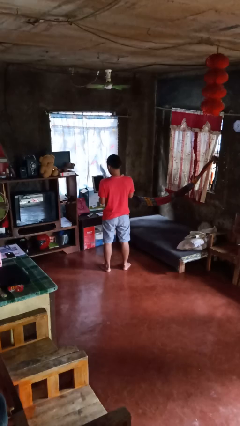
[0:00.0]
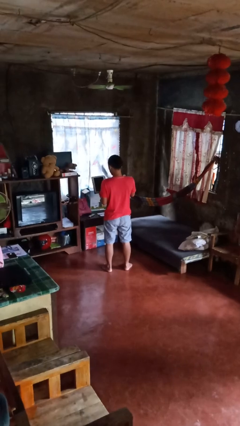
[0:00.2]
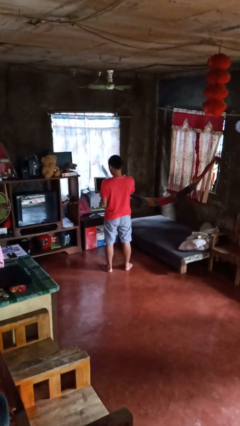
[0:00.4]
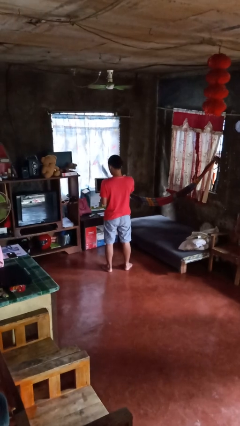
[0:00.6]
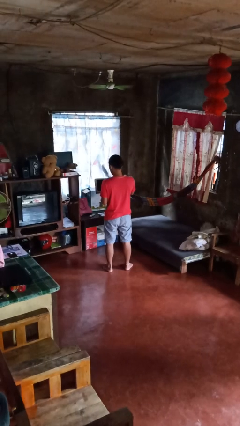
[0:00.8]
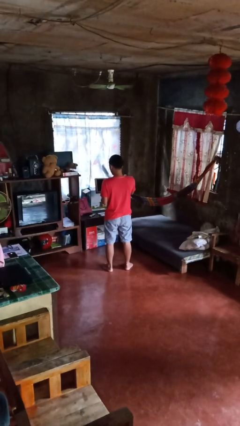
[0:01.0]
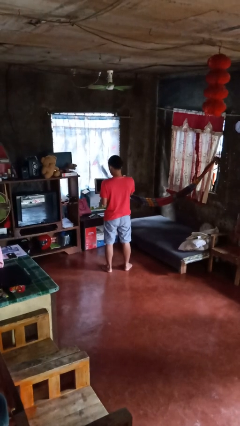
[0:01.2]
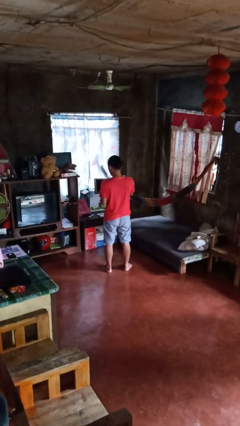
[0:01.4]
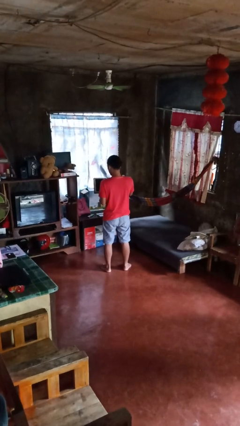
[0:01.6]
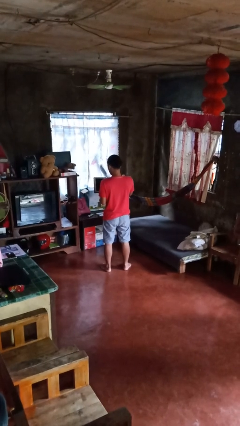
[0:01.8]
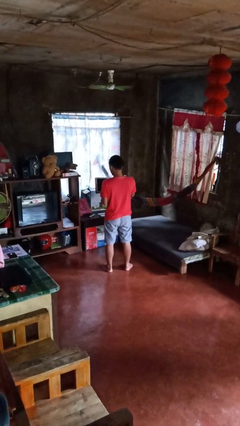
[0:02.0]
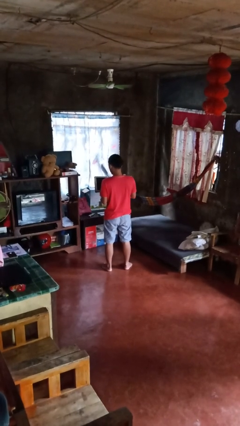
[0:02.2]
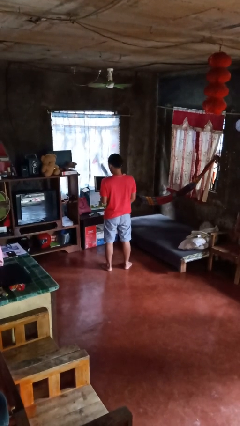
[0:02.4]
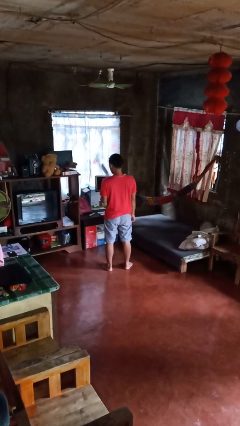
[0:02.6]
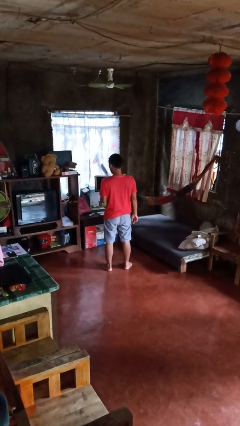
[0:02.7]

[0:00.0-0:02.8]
person interacts with tablet

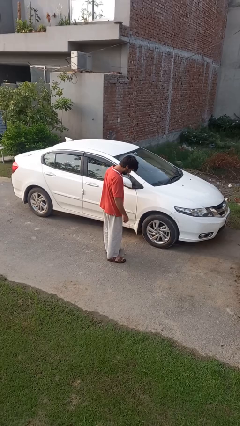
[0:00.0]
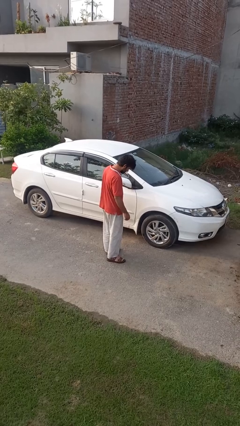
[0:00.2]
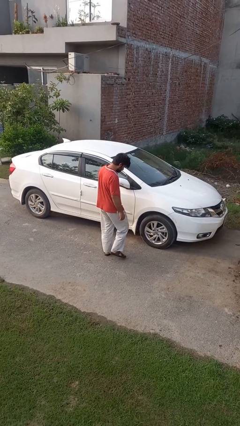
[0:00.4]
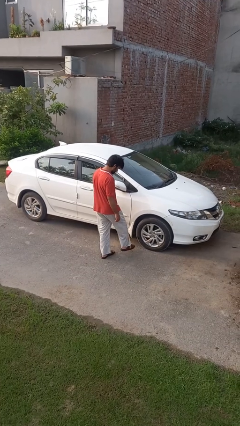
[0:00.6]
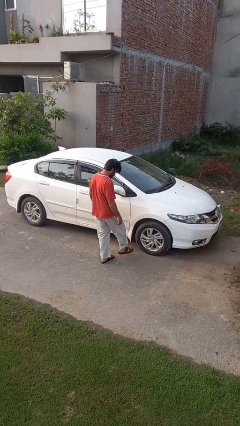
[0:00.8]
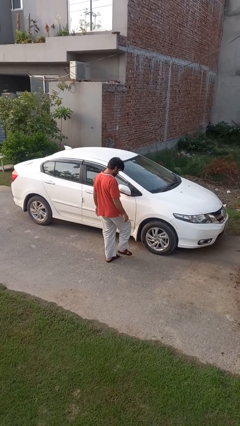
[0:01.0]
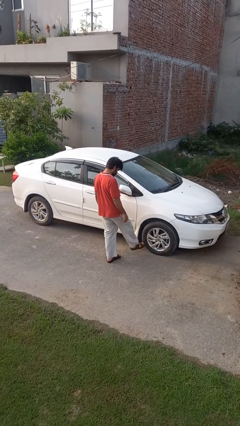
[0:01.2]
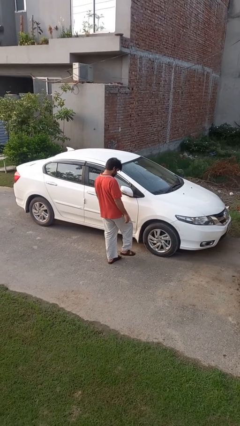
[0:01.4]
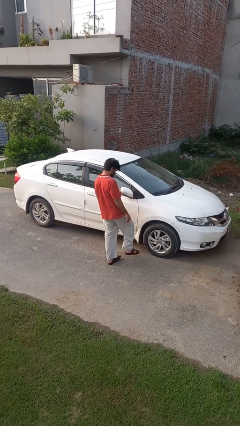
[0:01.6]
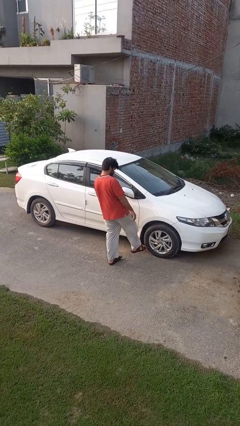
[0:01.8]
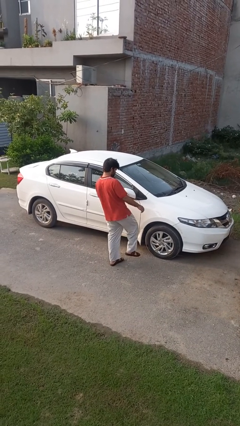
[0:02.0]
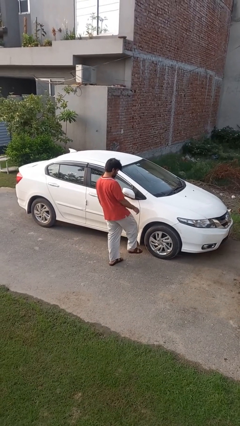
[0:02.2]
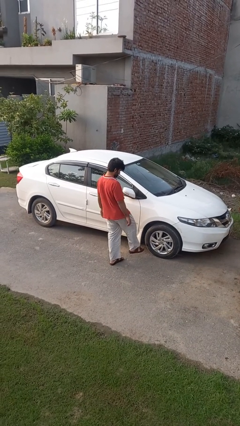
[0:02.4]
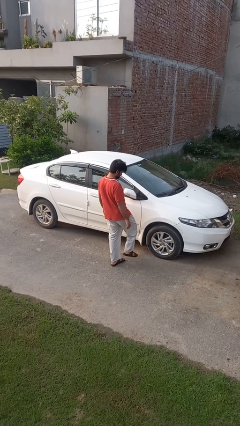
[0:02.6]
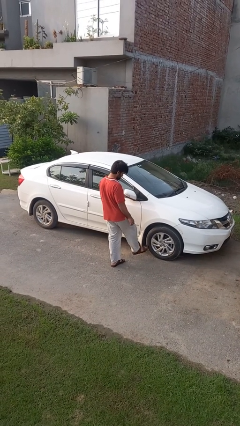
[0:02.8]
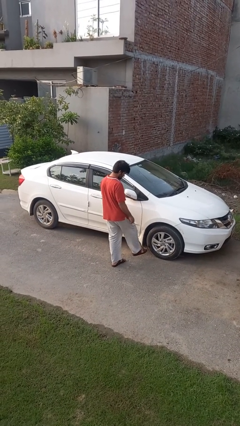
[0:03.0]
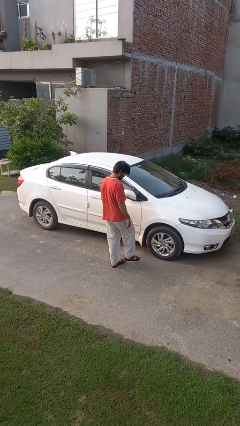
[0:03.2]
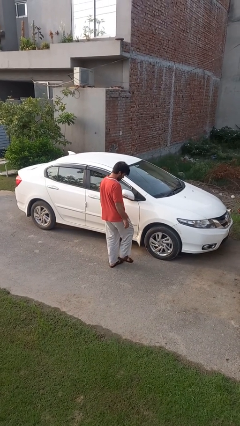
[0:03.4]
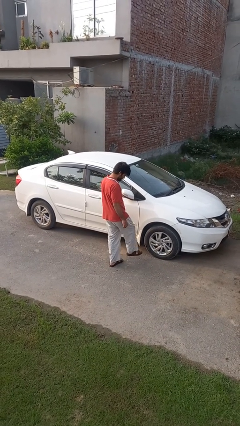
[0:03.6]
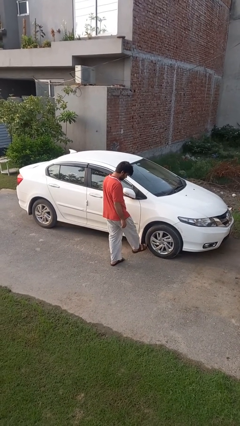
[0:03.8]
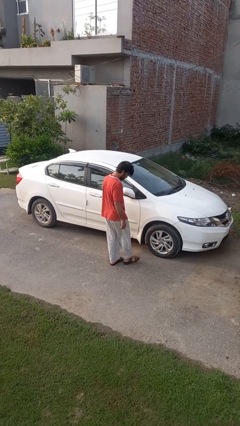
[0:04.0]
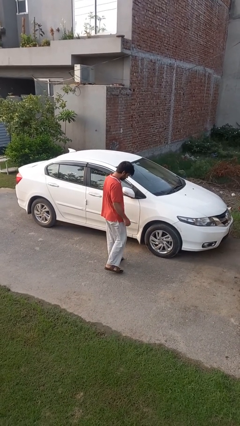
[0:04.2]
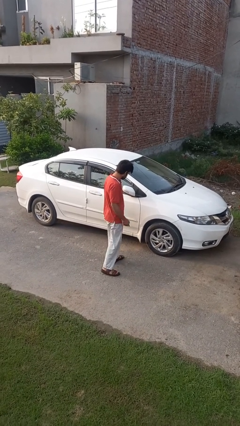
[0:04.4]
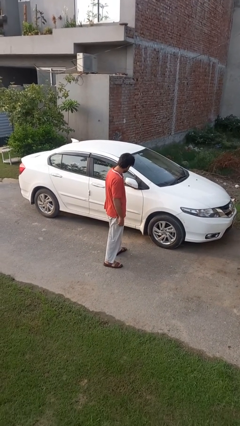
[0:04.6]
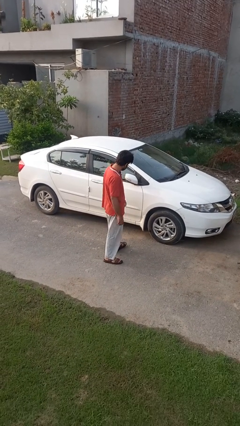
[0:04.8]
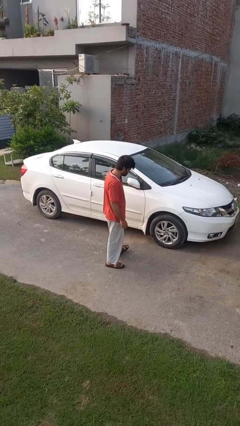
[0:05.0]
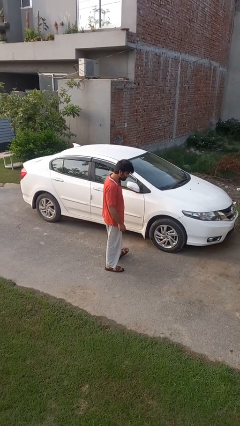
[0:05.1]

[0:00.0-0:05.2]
person kicks car tires

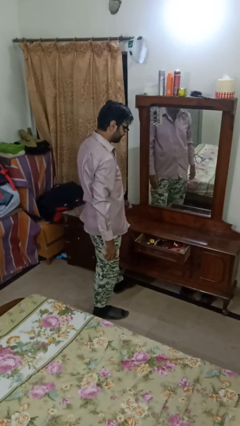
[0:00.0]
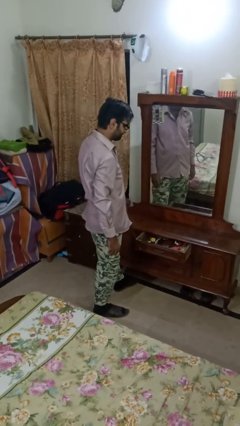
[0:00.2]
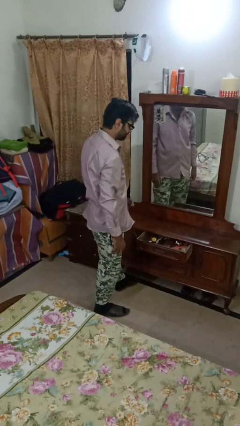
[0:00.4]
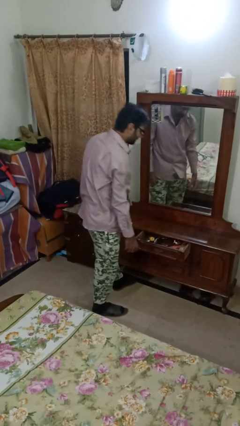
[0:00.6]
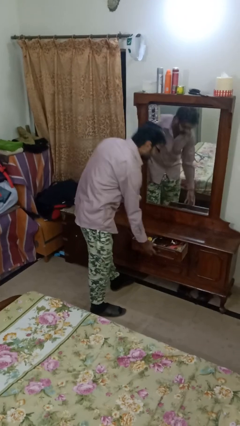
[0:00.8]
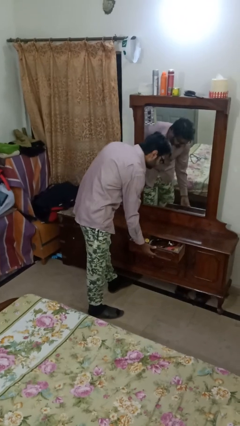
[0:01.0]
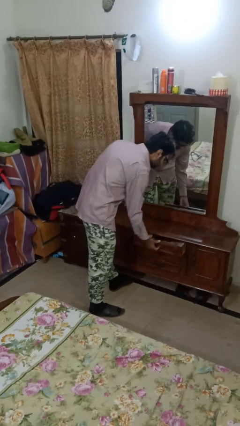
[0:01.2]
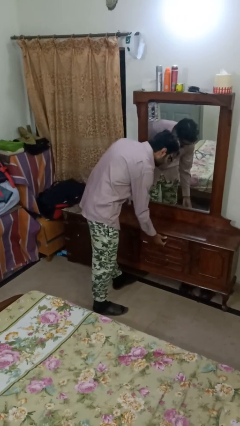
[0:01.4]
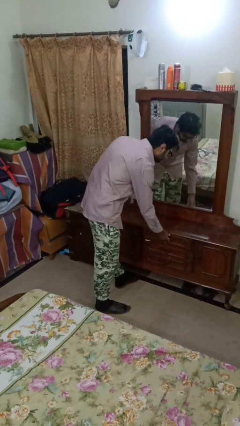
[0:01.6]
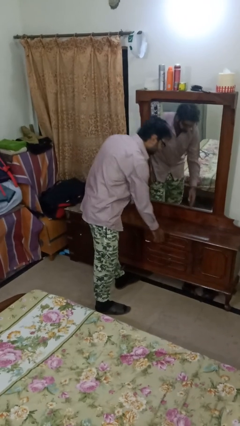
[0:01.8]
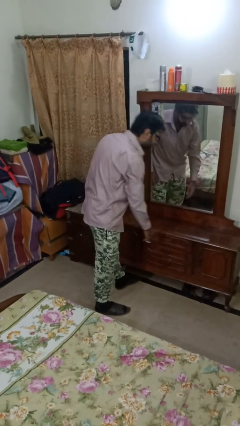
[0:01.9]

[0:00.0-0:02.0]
person closes dresser drawer

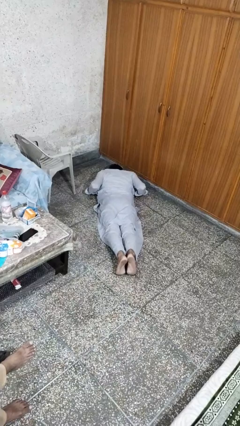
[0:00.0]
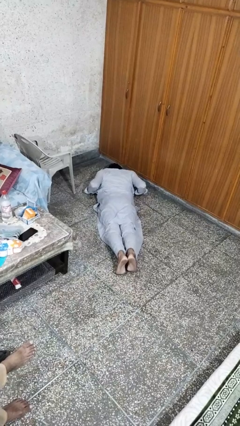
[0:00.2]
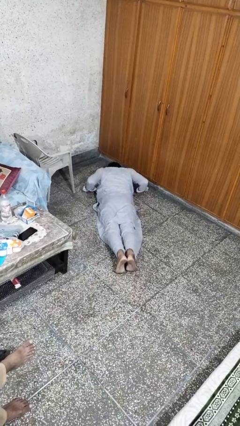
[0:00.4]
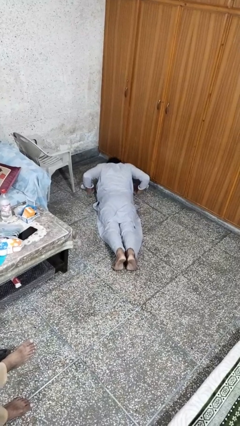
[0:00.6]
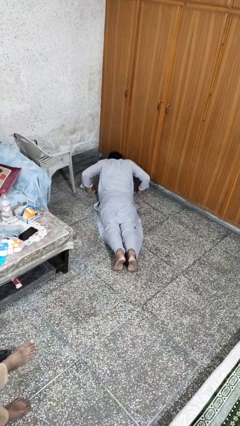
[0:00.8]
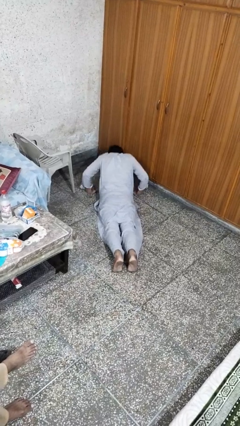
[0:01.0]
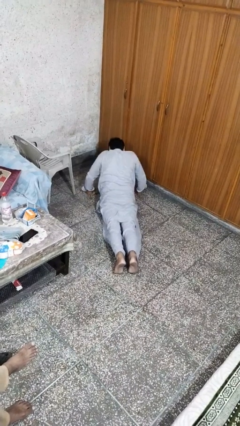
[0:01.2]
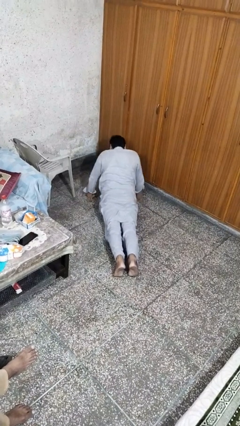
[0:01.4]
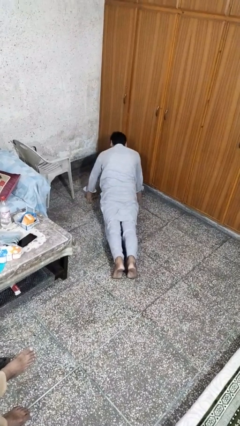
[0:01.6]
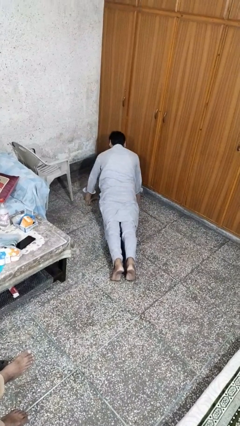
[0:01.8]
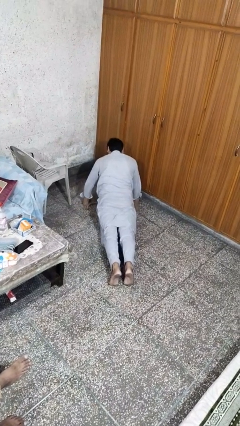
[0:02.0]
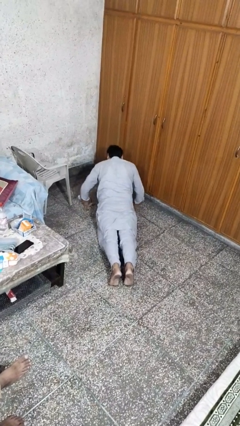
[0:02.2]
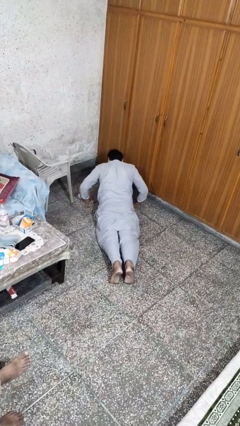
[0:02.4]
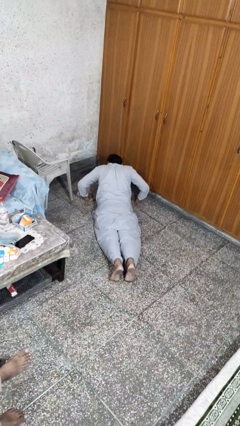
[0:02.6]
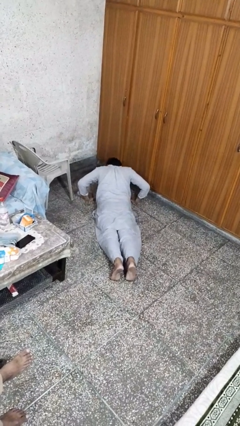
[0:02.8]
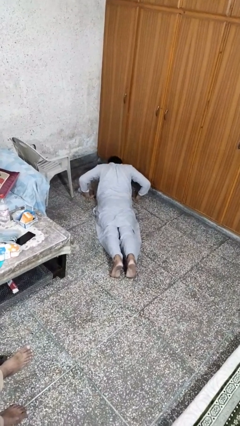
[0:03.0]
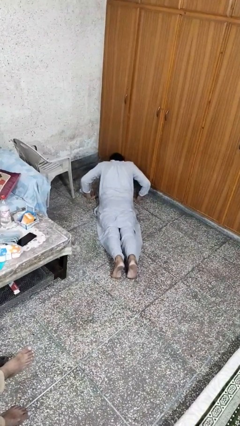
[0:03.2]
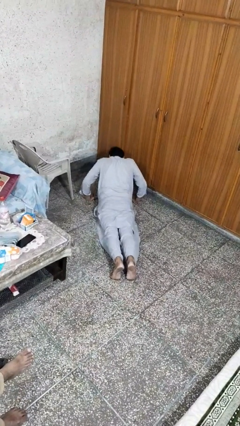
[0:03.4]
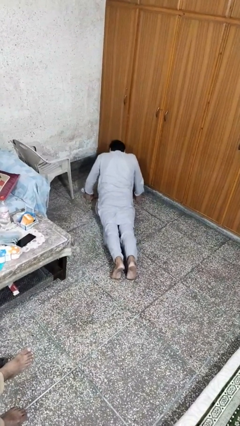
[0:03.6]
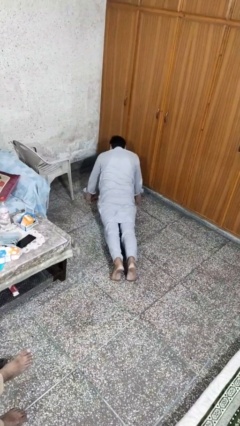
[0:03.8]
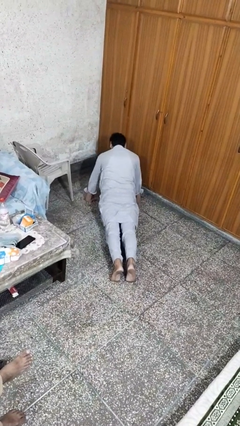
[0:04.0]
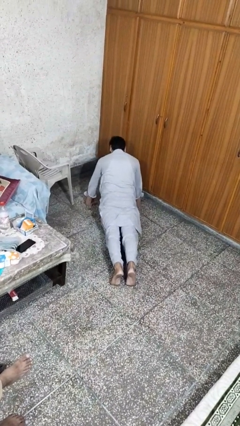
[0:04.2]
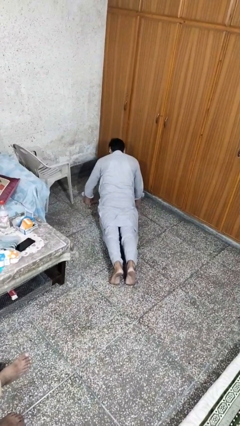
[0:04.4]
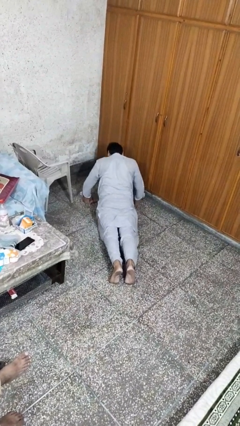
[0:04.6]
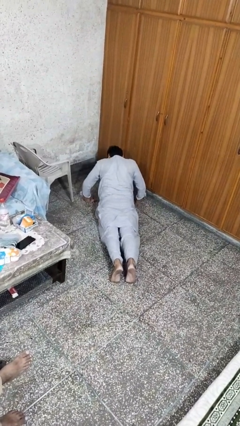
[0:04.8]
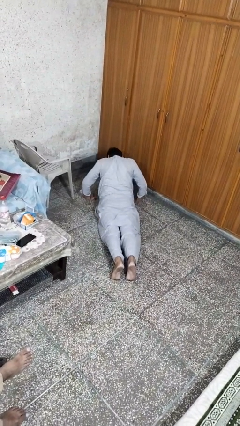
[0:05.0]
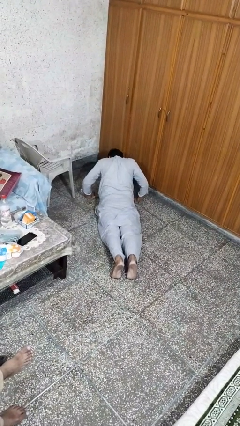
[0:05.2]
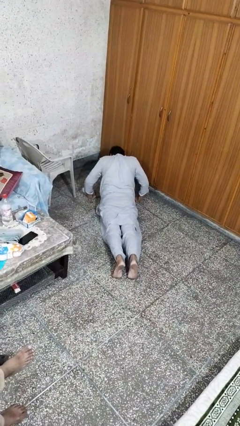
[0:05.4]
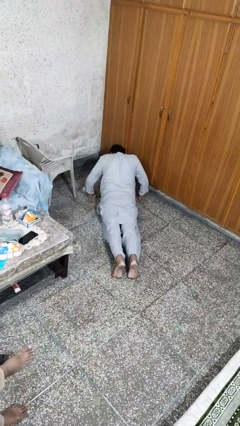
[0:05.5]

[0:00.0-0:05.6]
person exercises with pushup

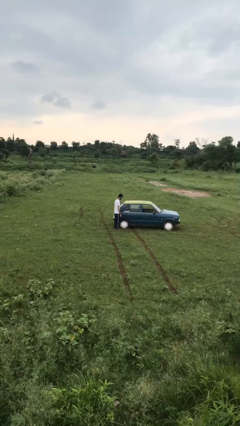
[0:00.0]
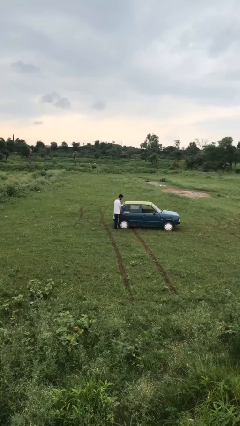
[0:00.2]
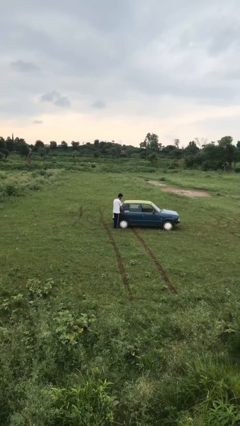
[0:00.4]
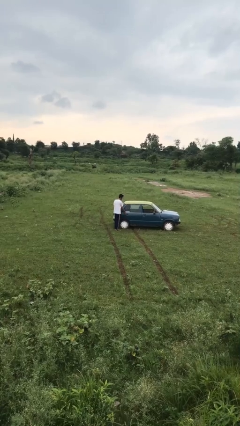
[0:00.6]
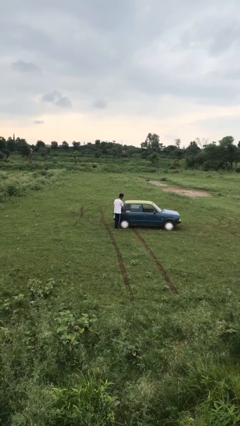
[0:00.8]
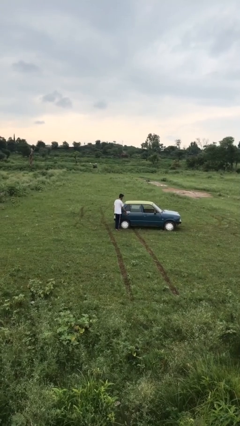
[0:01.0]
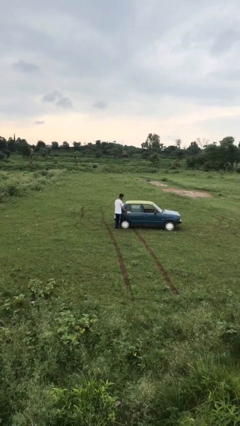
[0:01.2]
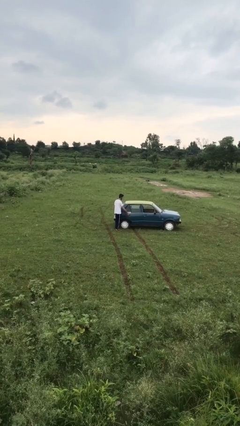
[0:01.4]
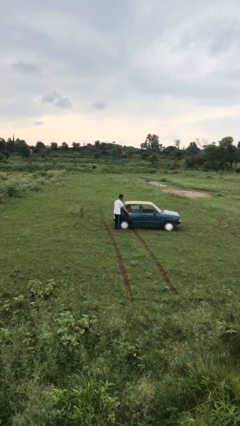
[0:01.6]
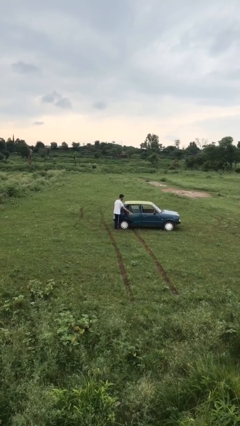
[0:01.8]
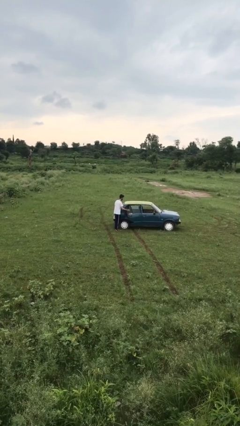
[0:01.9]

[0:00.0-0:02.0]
person opens car door

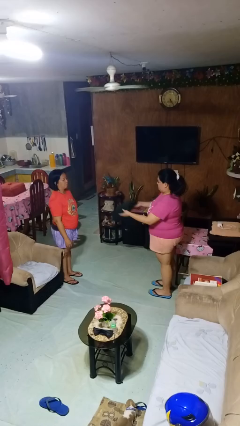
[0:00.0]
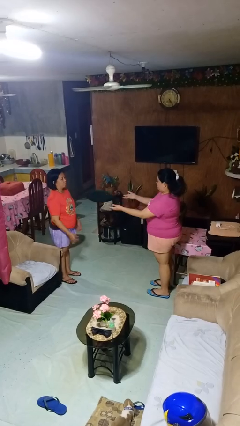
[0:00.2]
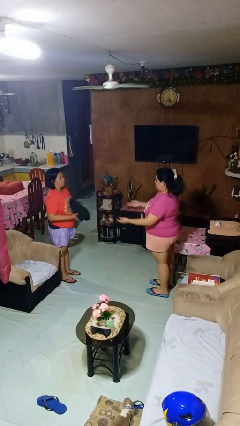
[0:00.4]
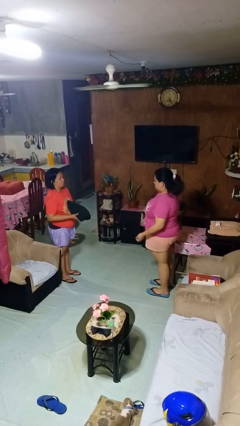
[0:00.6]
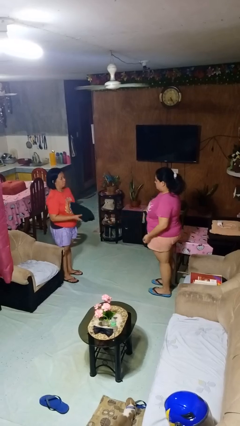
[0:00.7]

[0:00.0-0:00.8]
person throws object to person
